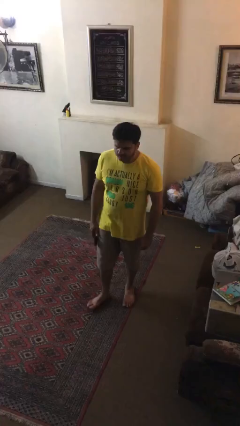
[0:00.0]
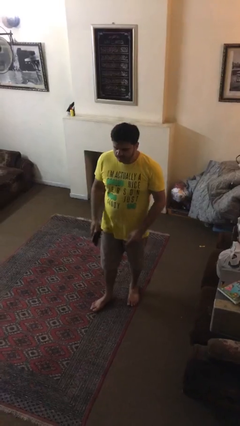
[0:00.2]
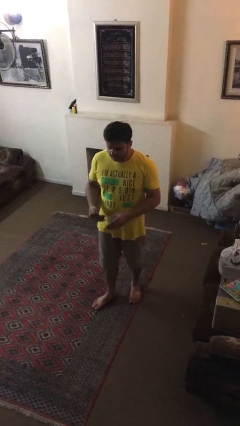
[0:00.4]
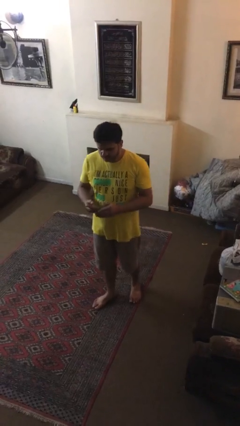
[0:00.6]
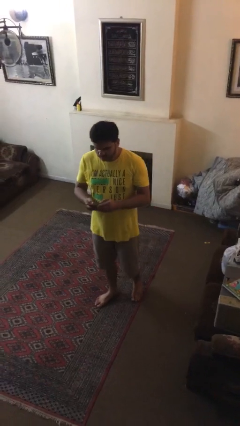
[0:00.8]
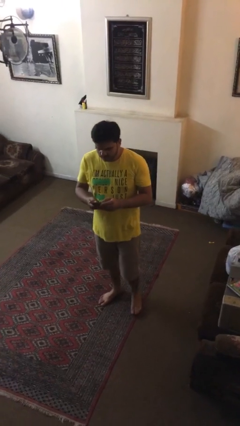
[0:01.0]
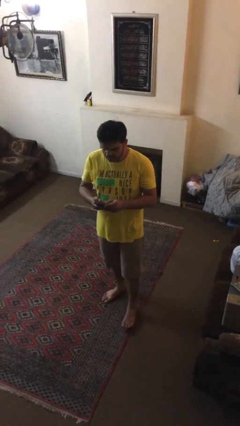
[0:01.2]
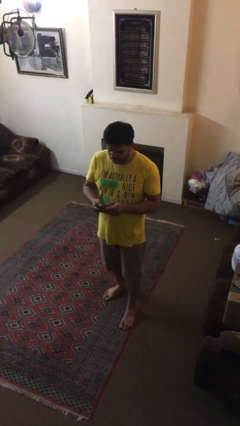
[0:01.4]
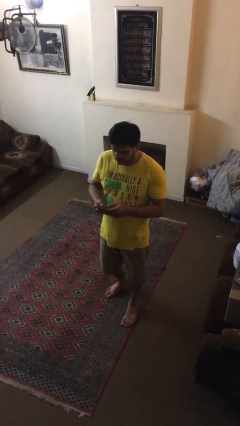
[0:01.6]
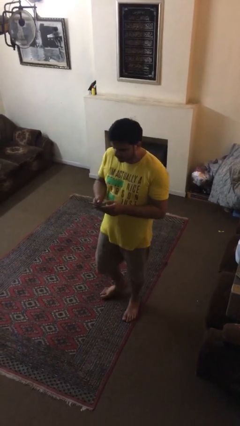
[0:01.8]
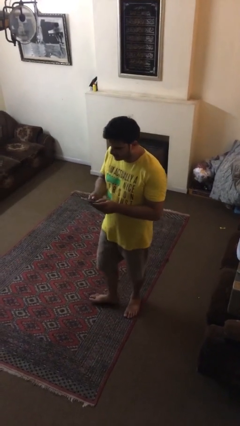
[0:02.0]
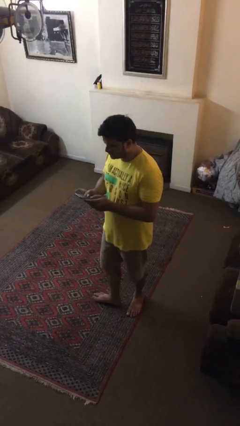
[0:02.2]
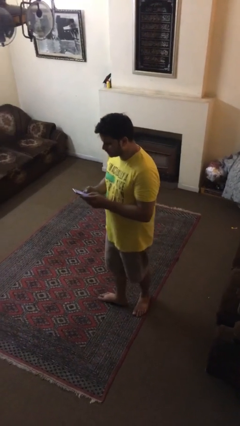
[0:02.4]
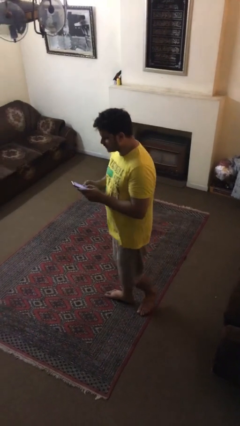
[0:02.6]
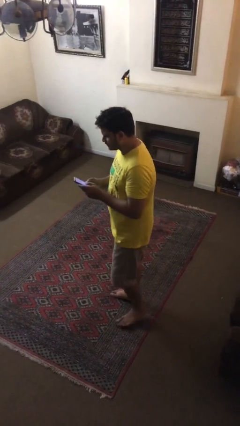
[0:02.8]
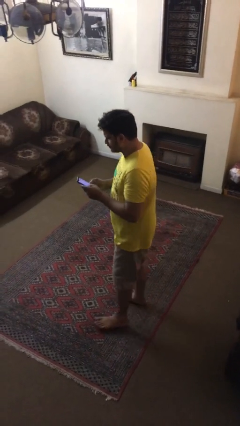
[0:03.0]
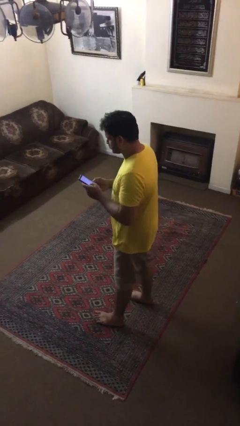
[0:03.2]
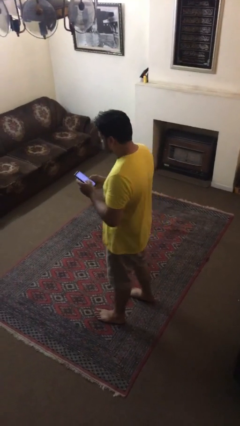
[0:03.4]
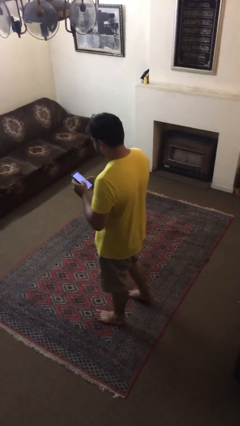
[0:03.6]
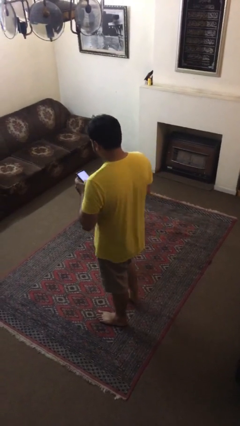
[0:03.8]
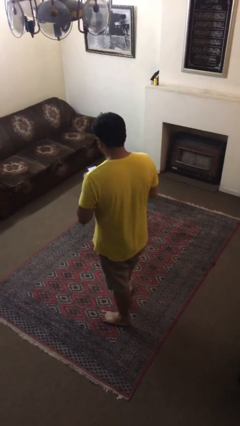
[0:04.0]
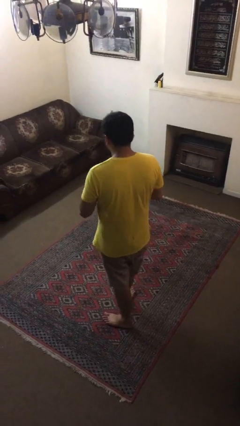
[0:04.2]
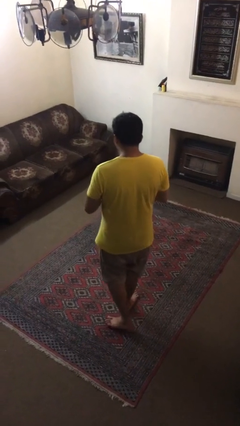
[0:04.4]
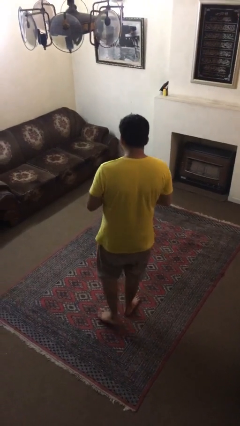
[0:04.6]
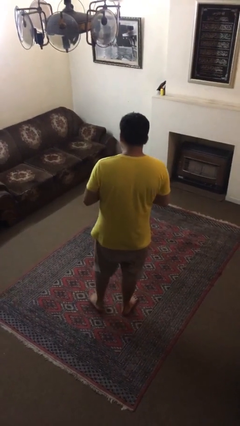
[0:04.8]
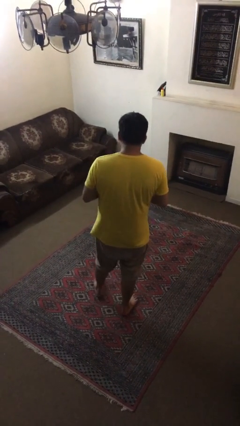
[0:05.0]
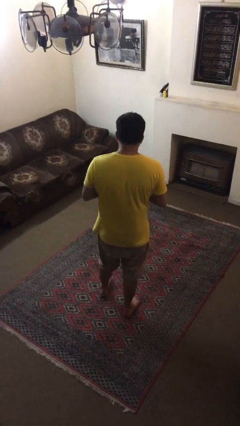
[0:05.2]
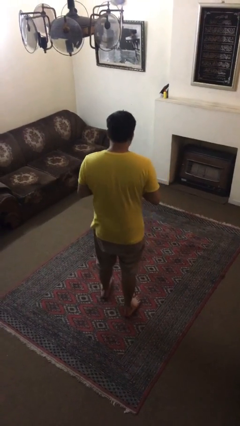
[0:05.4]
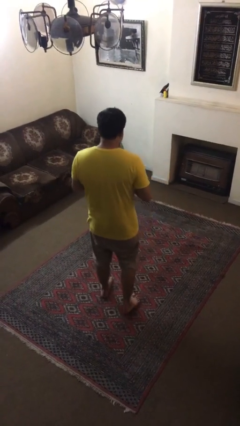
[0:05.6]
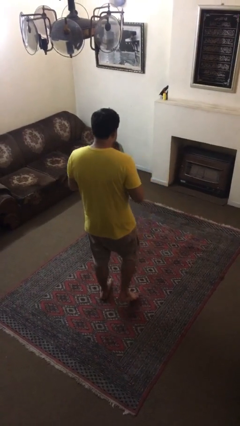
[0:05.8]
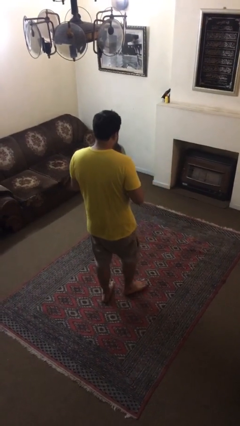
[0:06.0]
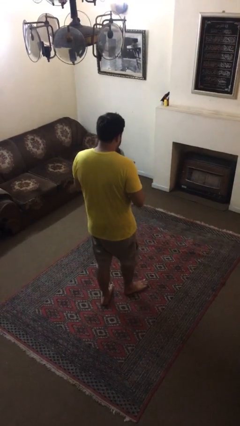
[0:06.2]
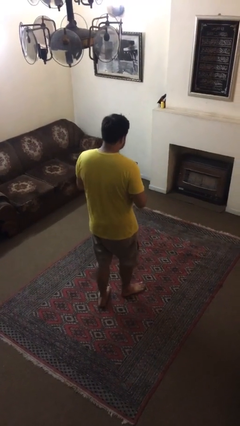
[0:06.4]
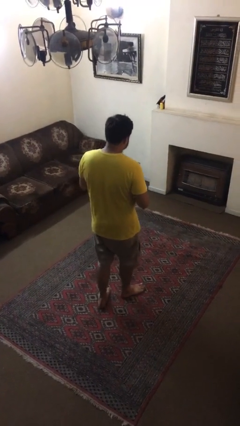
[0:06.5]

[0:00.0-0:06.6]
person texts on phone

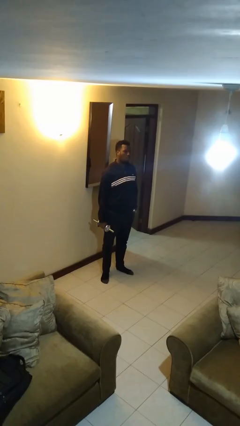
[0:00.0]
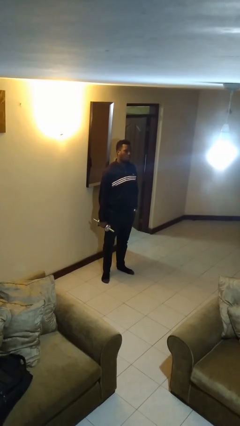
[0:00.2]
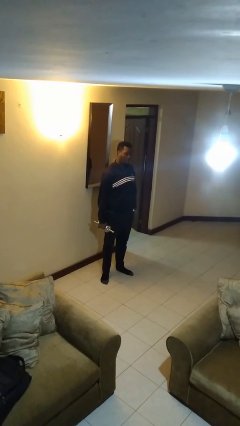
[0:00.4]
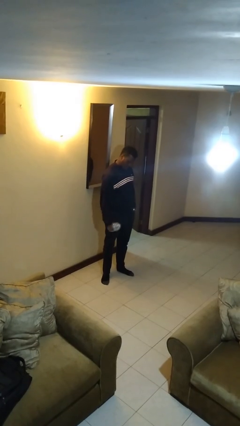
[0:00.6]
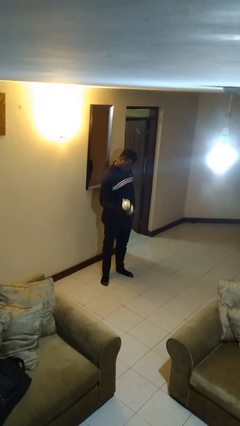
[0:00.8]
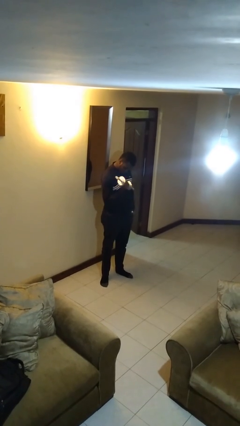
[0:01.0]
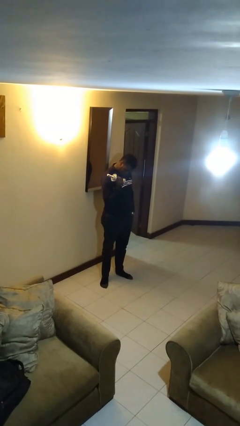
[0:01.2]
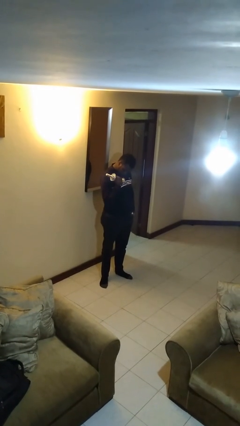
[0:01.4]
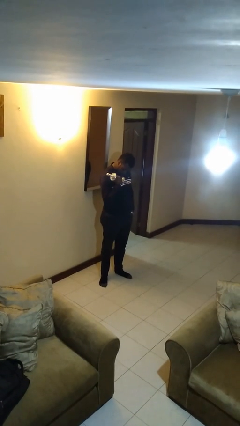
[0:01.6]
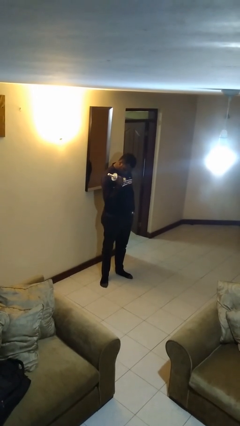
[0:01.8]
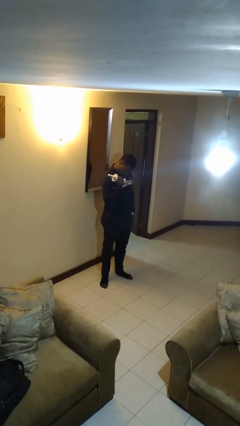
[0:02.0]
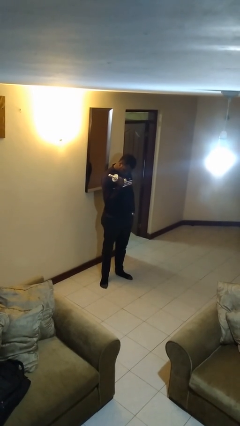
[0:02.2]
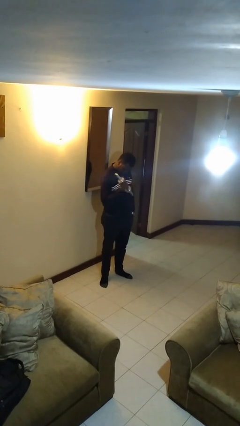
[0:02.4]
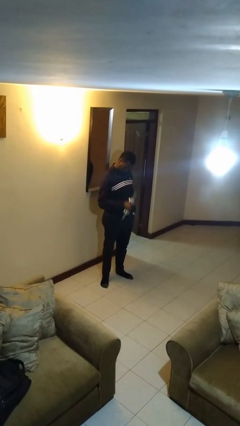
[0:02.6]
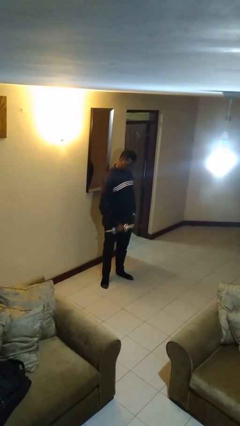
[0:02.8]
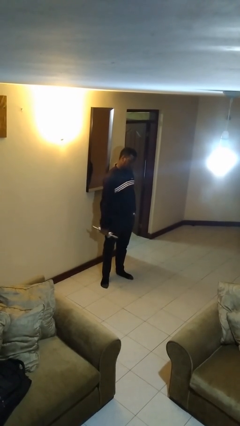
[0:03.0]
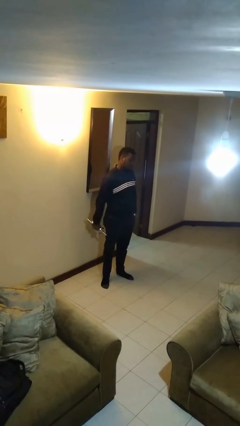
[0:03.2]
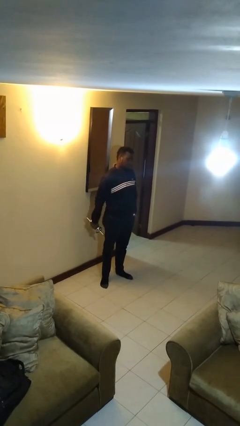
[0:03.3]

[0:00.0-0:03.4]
person lifts dumbbells

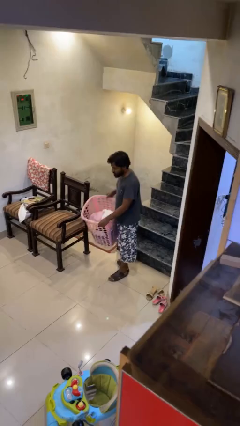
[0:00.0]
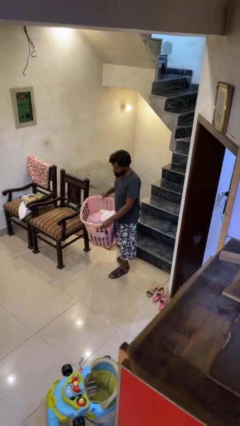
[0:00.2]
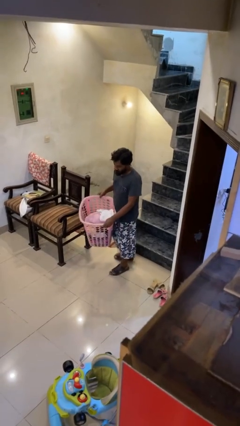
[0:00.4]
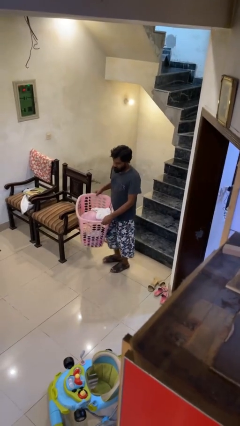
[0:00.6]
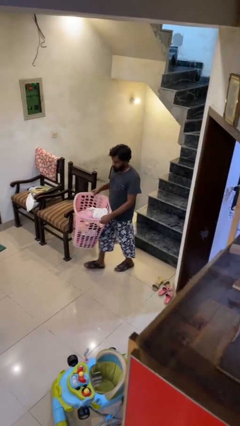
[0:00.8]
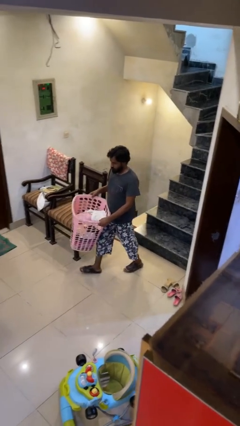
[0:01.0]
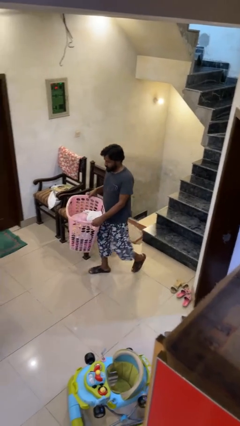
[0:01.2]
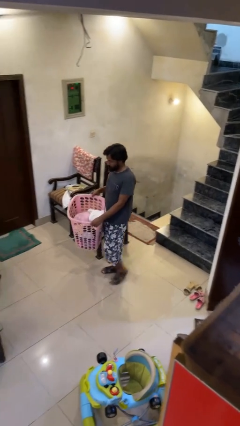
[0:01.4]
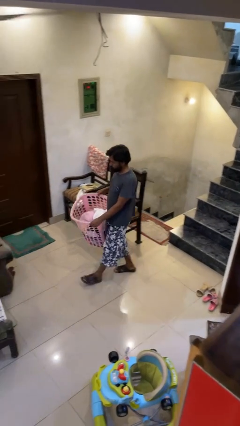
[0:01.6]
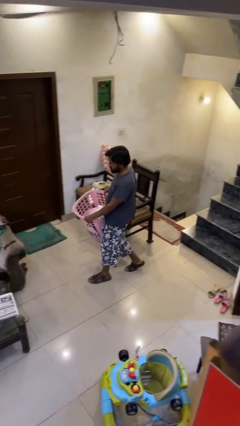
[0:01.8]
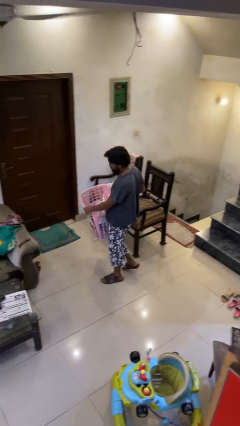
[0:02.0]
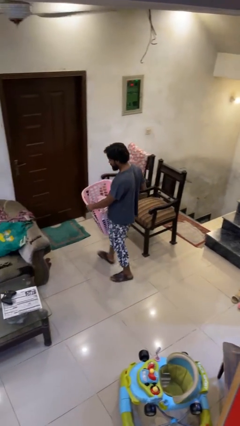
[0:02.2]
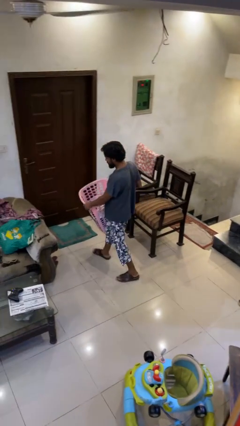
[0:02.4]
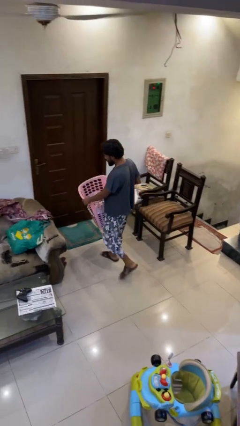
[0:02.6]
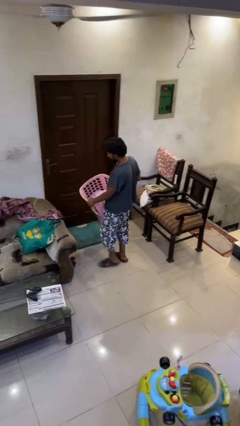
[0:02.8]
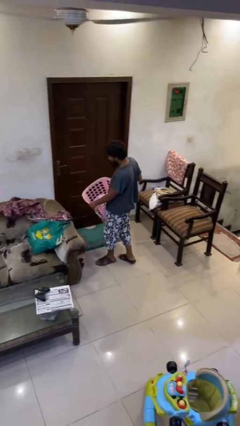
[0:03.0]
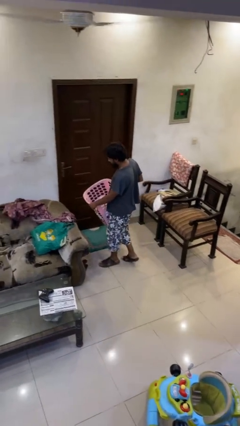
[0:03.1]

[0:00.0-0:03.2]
person carries laundry basket

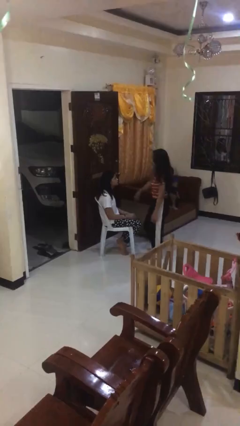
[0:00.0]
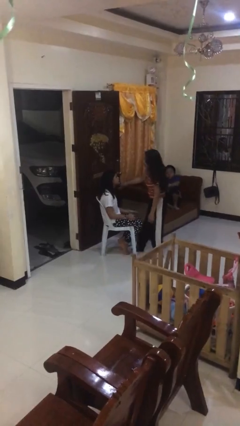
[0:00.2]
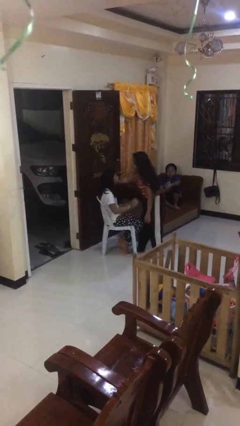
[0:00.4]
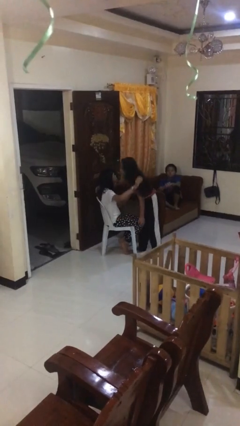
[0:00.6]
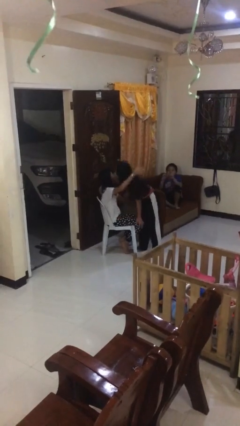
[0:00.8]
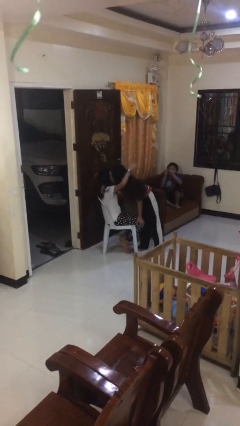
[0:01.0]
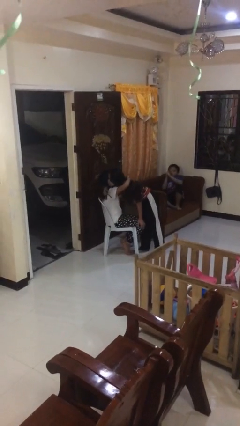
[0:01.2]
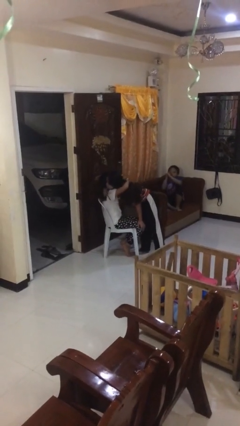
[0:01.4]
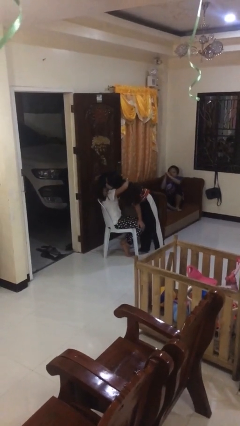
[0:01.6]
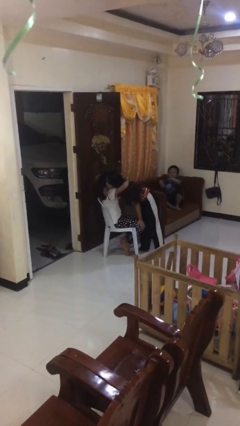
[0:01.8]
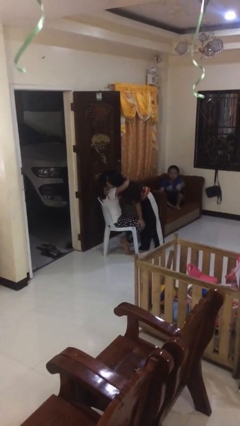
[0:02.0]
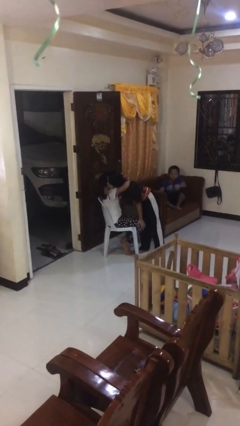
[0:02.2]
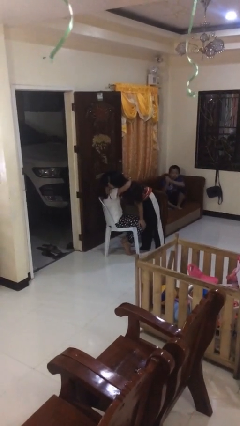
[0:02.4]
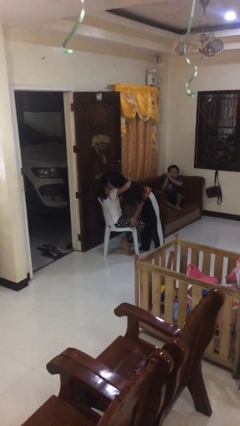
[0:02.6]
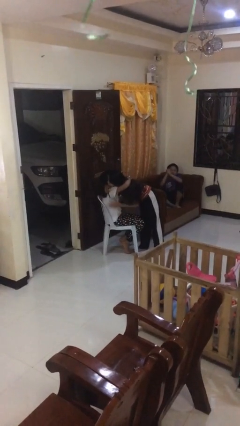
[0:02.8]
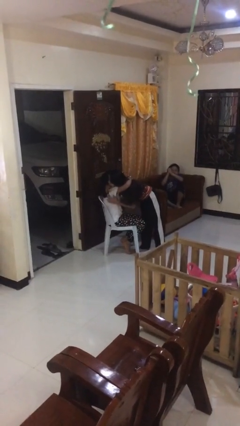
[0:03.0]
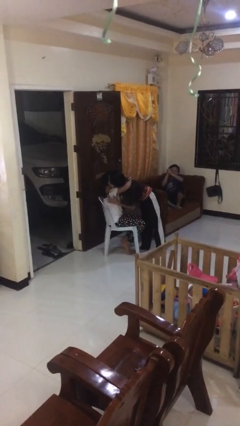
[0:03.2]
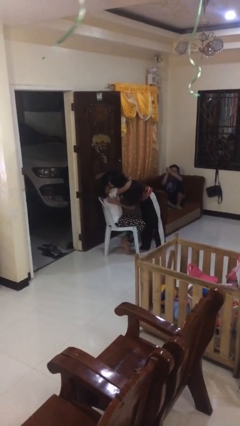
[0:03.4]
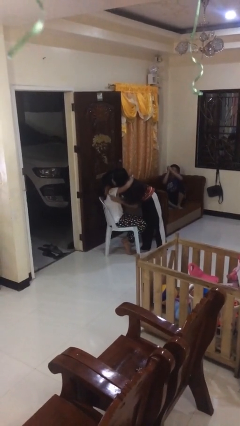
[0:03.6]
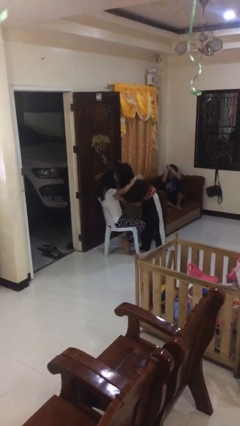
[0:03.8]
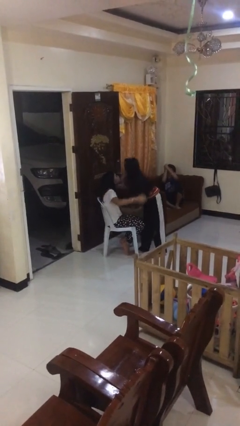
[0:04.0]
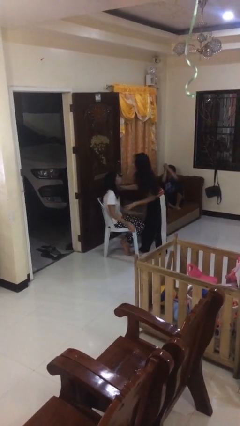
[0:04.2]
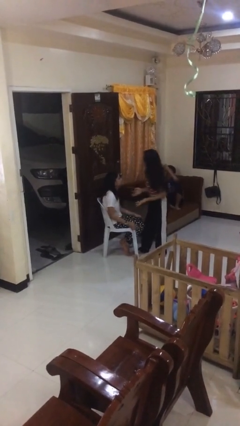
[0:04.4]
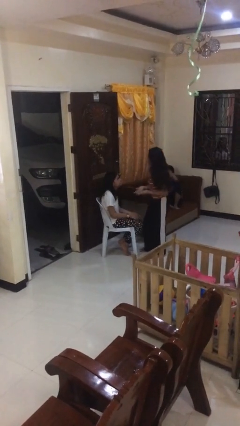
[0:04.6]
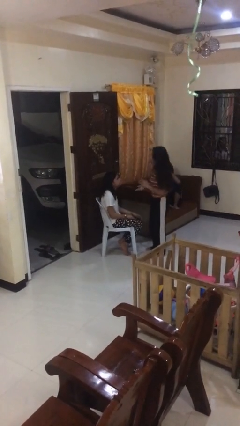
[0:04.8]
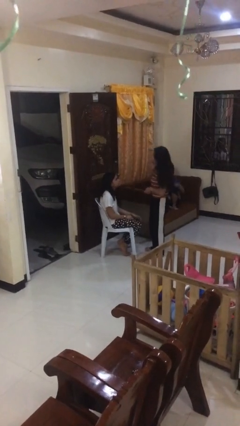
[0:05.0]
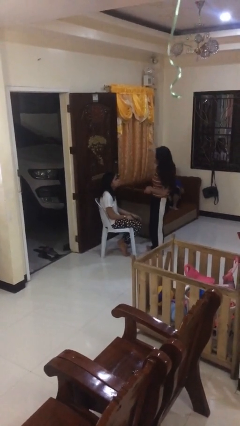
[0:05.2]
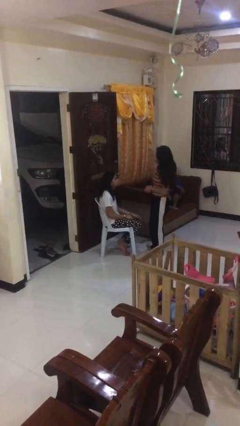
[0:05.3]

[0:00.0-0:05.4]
person embraces person
